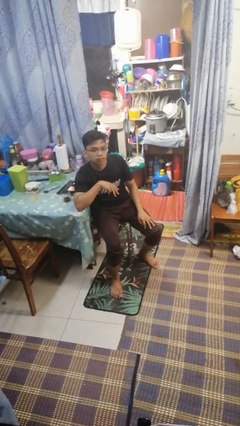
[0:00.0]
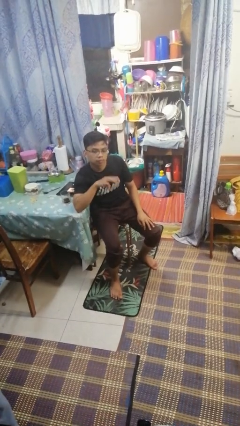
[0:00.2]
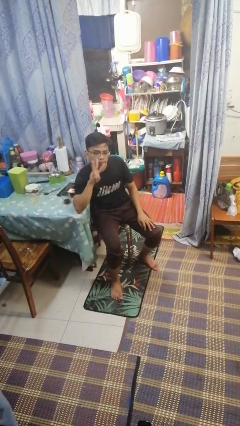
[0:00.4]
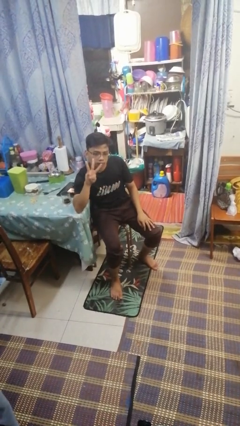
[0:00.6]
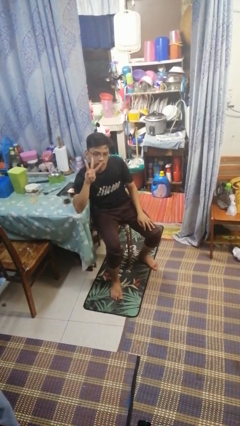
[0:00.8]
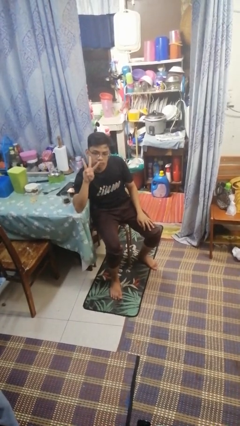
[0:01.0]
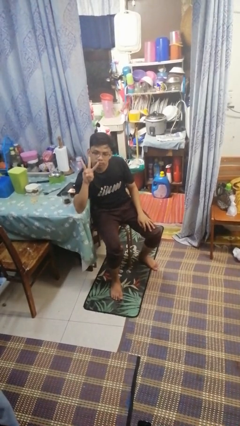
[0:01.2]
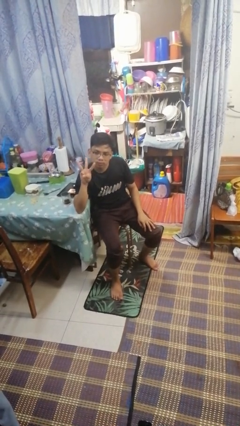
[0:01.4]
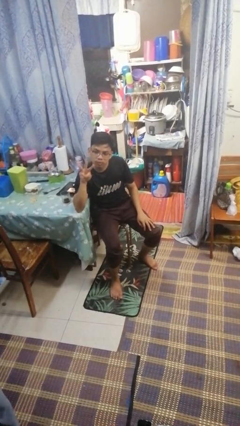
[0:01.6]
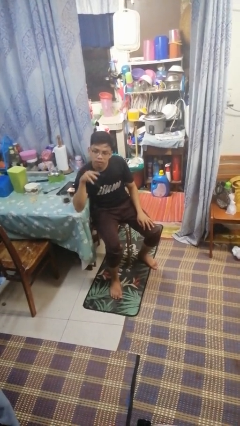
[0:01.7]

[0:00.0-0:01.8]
person gestures number three

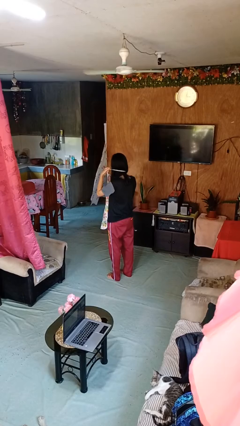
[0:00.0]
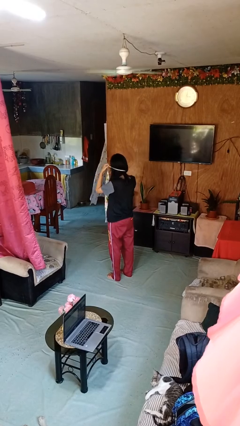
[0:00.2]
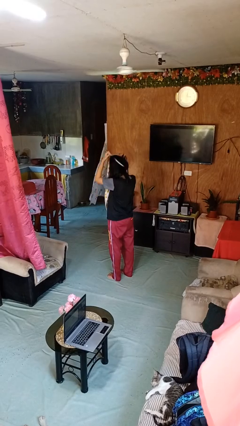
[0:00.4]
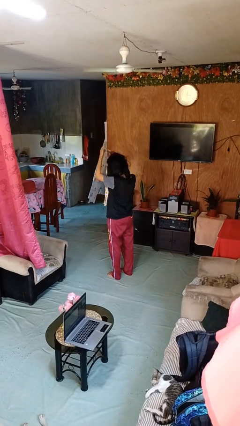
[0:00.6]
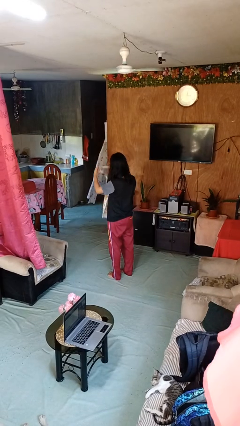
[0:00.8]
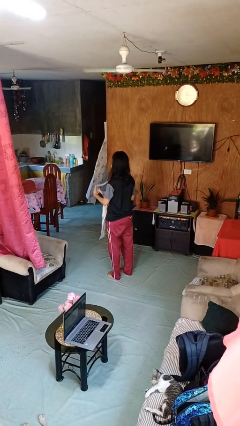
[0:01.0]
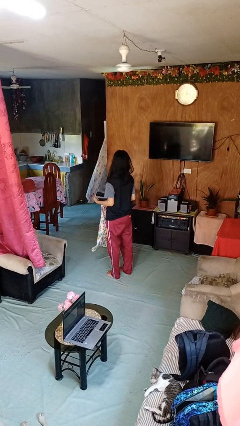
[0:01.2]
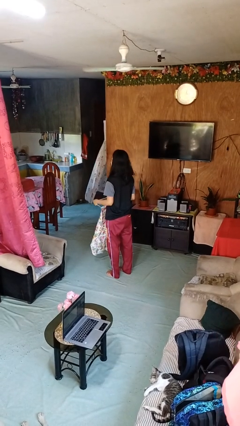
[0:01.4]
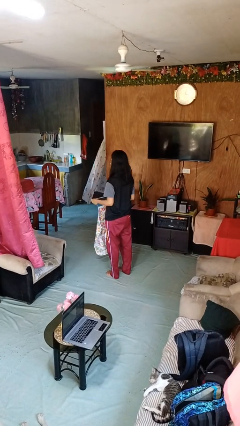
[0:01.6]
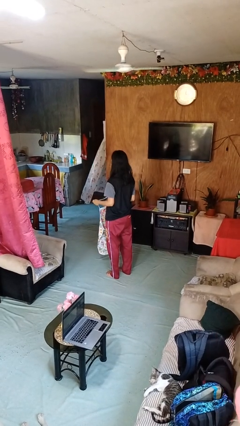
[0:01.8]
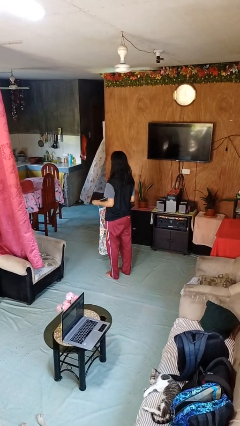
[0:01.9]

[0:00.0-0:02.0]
person takes off apron

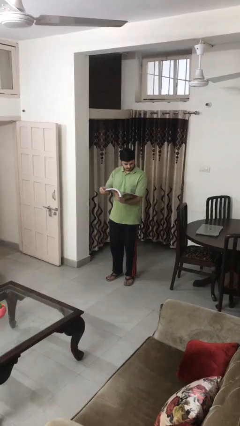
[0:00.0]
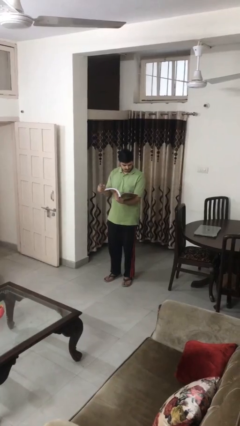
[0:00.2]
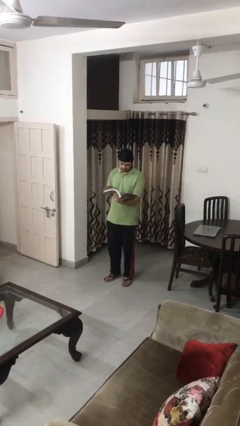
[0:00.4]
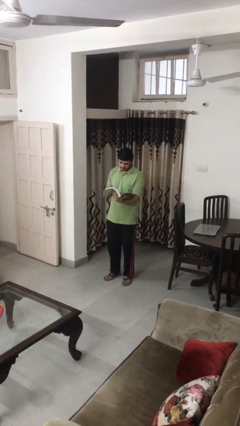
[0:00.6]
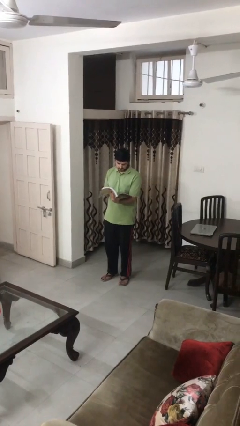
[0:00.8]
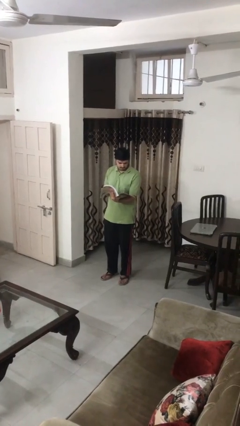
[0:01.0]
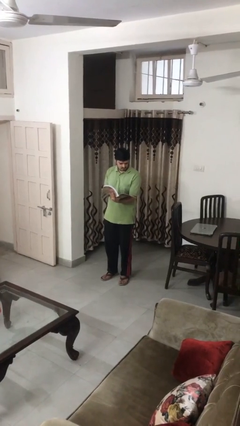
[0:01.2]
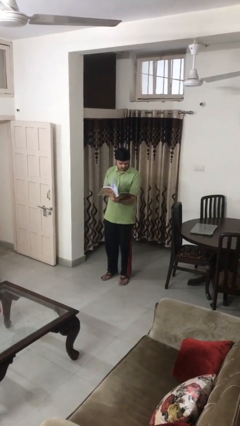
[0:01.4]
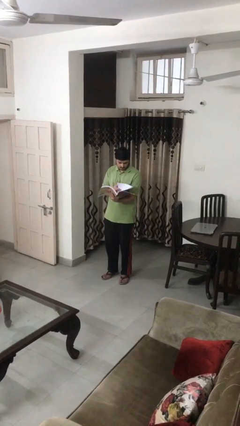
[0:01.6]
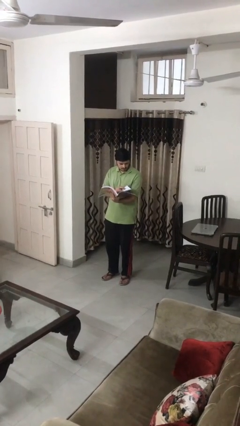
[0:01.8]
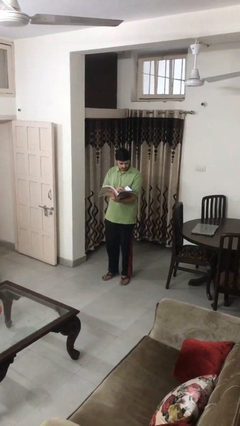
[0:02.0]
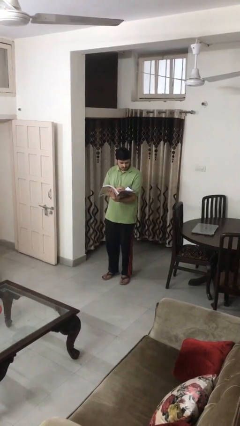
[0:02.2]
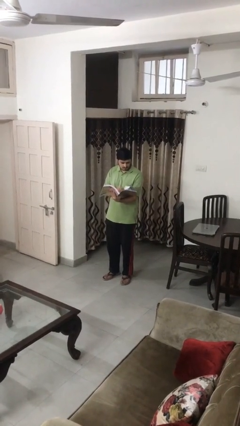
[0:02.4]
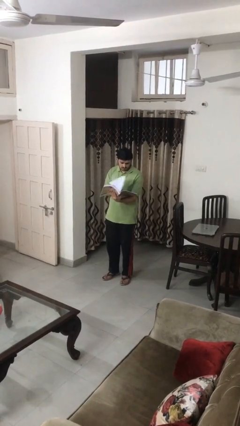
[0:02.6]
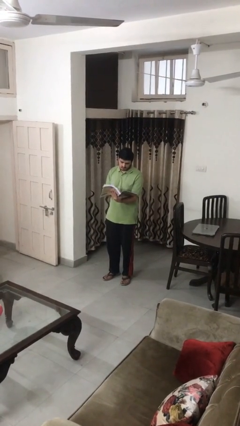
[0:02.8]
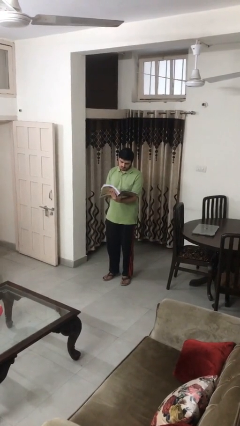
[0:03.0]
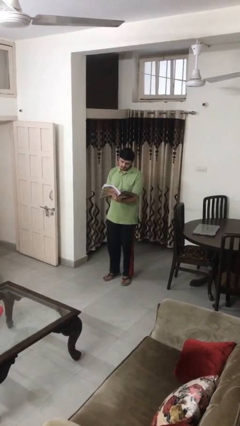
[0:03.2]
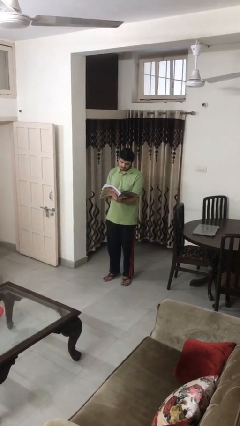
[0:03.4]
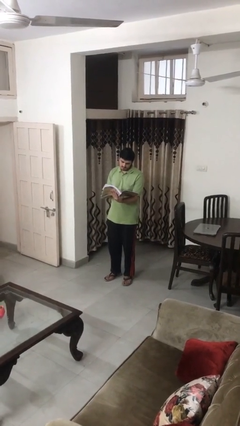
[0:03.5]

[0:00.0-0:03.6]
person reads document

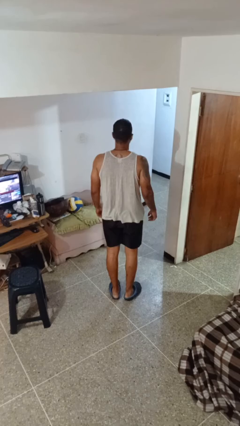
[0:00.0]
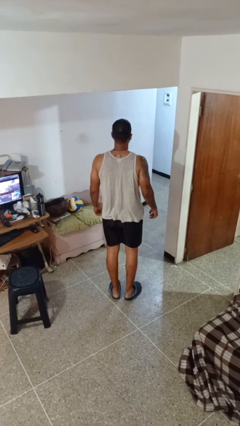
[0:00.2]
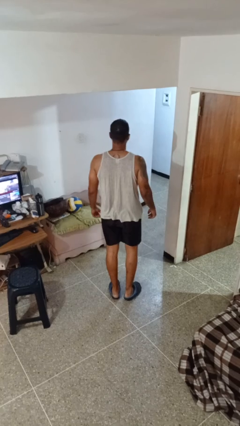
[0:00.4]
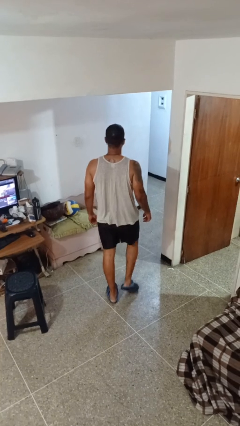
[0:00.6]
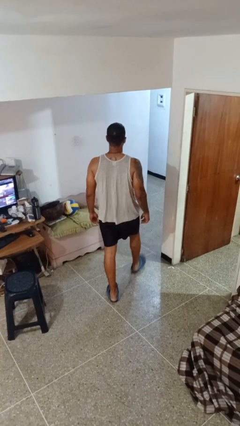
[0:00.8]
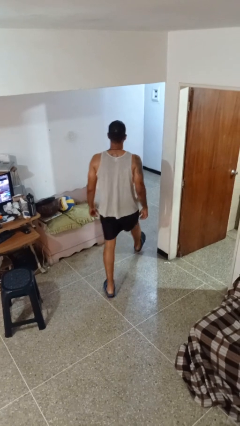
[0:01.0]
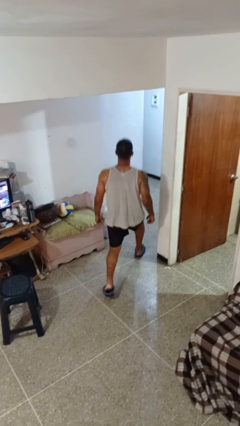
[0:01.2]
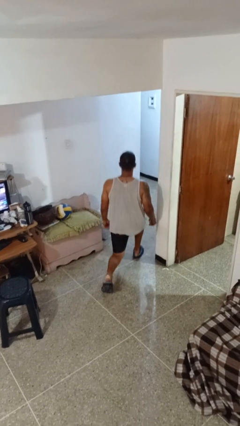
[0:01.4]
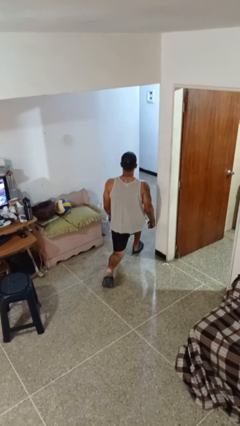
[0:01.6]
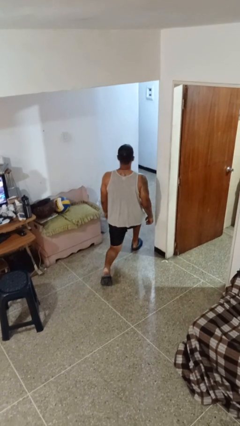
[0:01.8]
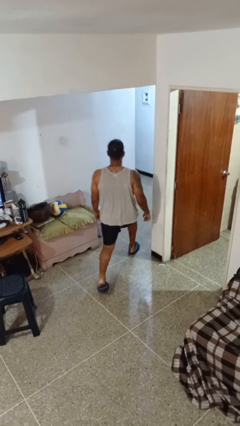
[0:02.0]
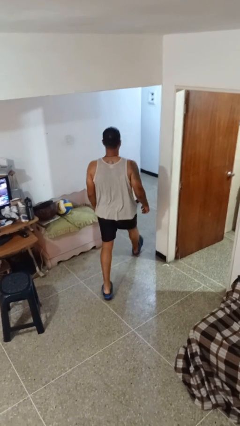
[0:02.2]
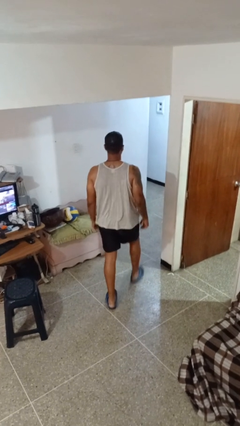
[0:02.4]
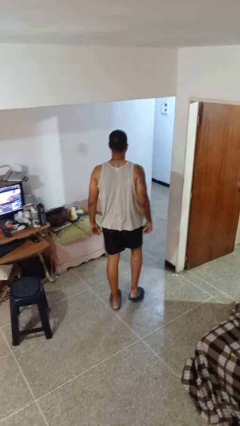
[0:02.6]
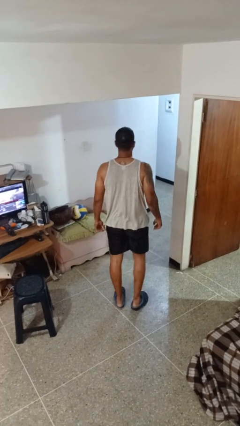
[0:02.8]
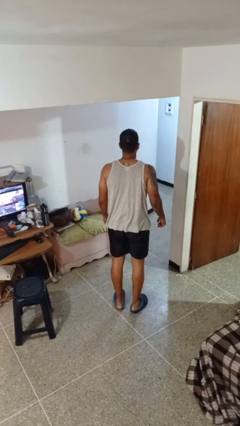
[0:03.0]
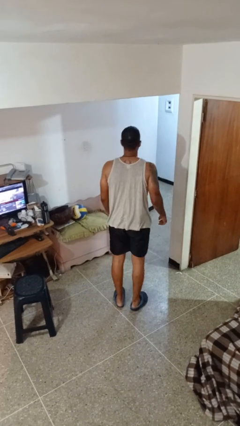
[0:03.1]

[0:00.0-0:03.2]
person exercises with lunges

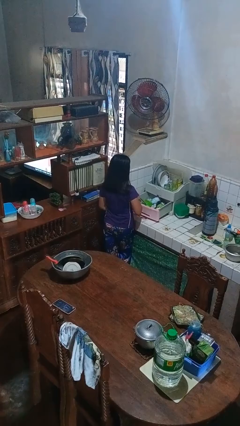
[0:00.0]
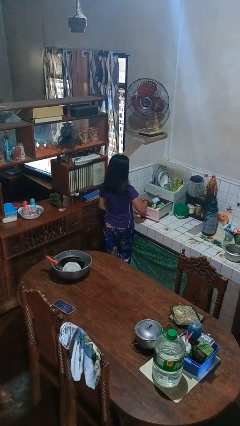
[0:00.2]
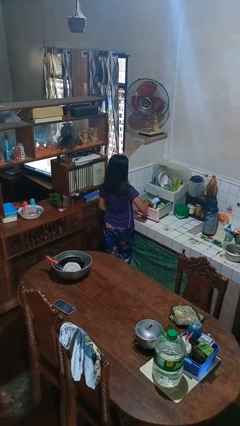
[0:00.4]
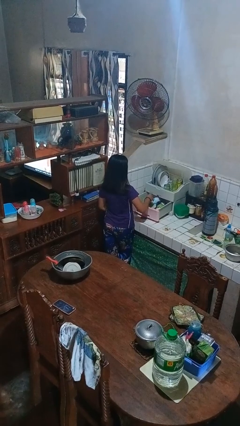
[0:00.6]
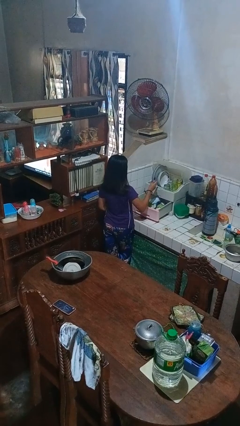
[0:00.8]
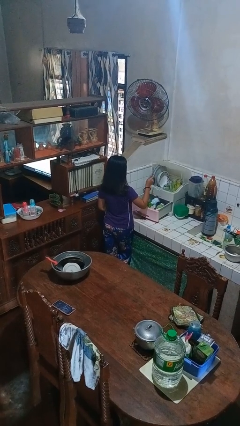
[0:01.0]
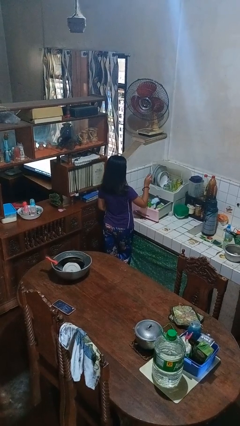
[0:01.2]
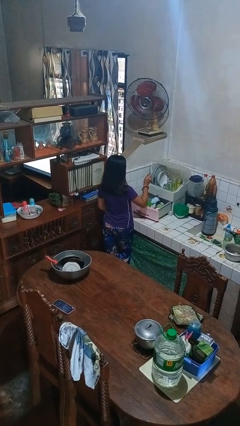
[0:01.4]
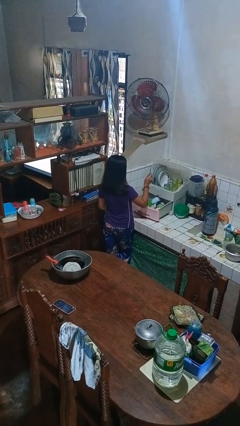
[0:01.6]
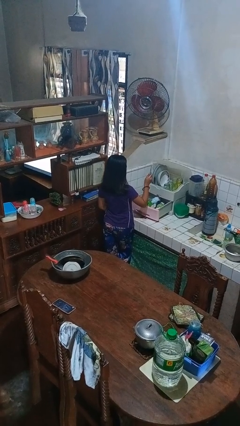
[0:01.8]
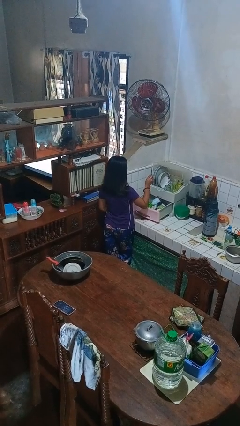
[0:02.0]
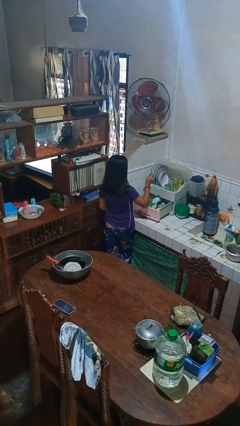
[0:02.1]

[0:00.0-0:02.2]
person takes object from kitchen drawer

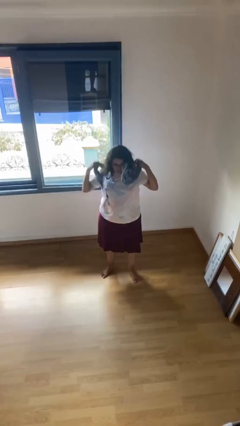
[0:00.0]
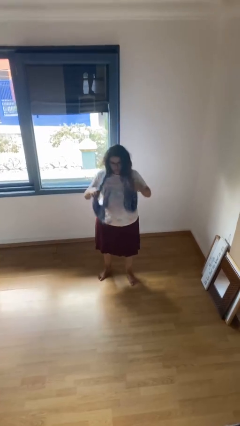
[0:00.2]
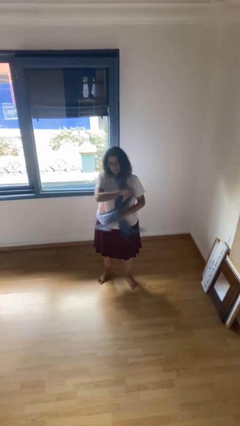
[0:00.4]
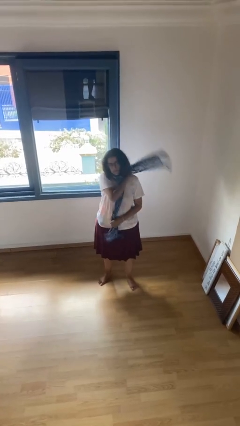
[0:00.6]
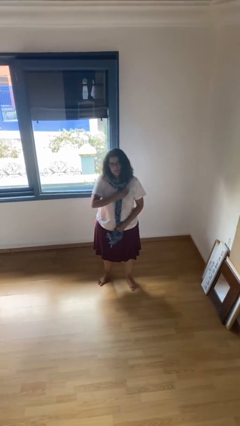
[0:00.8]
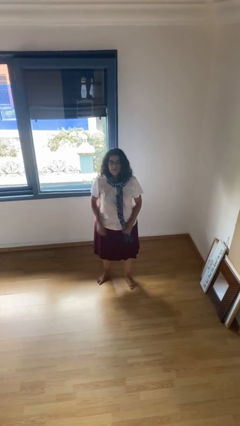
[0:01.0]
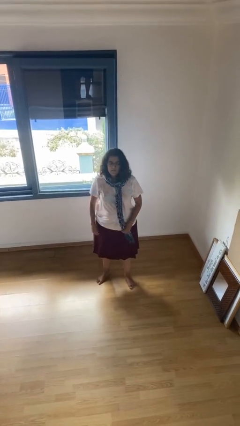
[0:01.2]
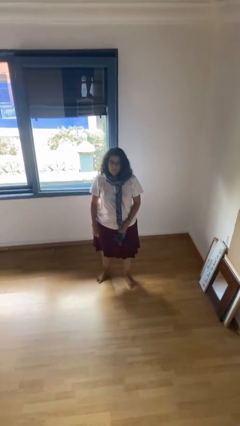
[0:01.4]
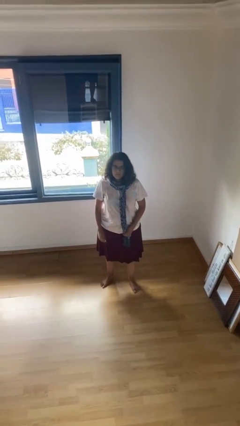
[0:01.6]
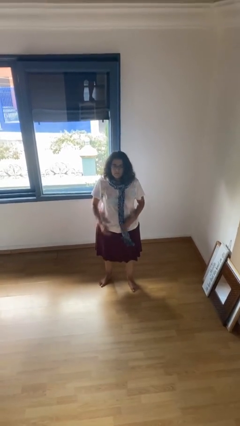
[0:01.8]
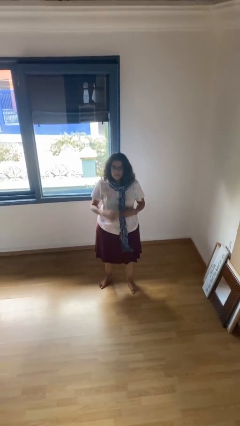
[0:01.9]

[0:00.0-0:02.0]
person puts on scarf

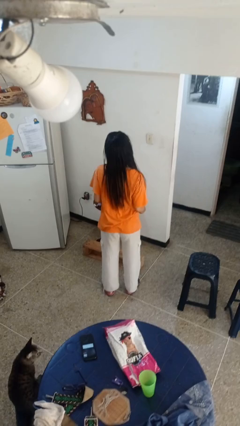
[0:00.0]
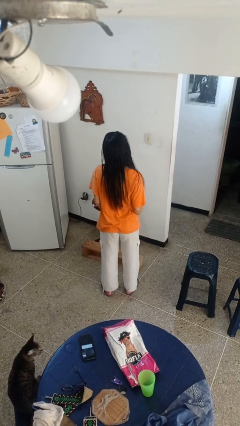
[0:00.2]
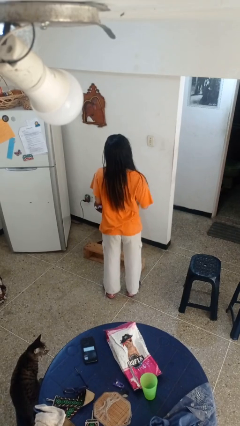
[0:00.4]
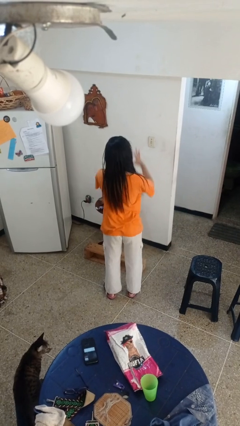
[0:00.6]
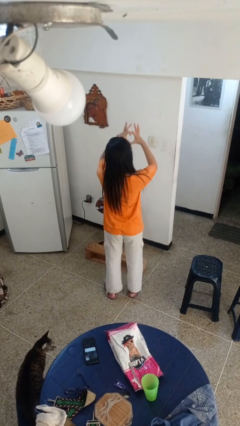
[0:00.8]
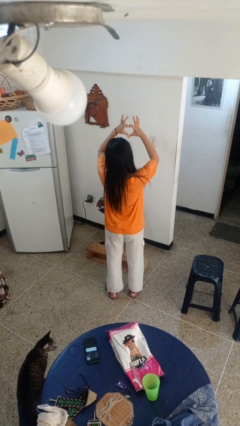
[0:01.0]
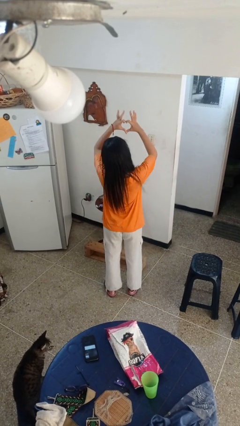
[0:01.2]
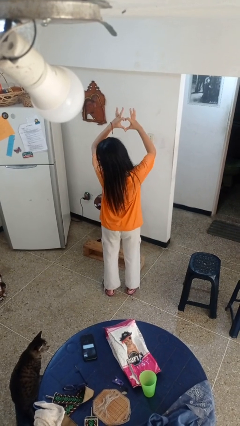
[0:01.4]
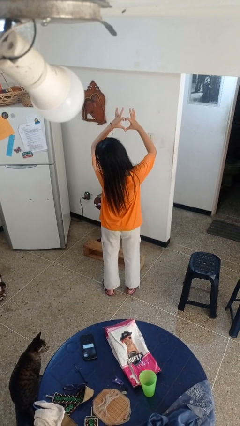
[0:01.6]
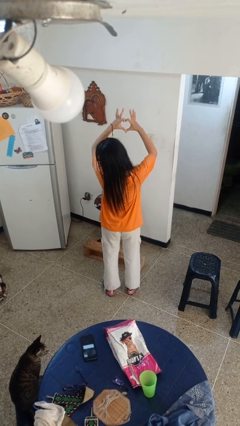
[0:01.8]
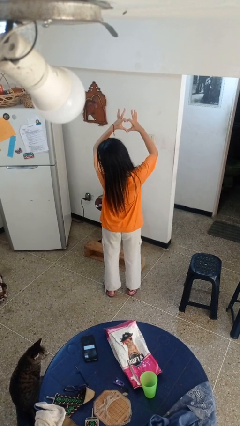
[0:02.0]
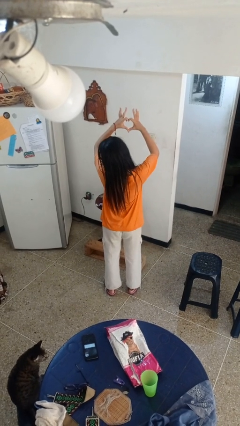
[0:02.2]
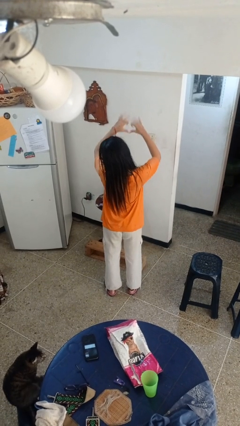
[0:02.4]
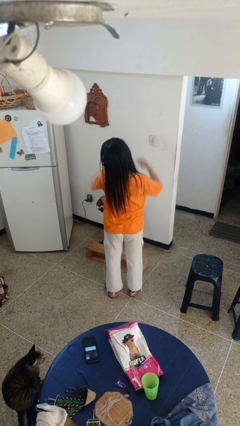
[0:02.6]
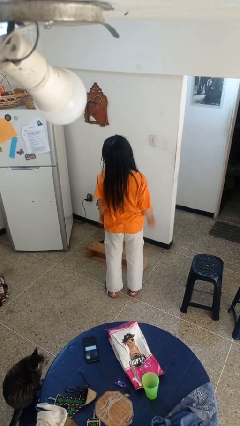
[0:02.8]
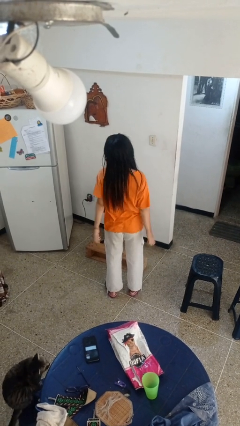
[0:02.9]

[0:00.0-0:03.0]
person gestures heart
